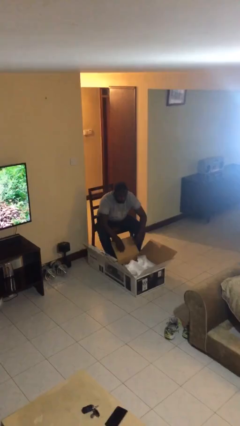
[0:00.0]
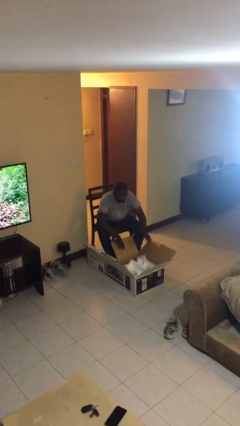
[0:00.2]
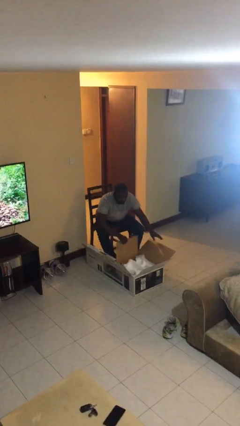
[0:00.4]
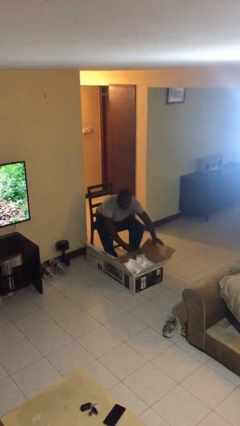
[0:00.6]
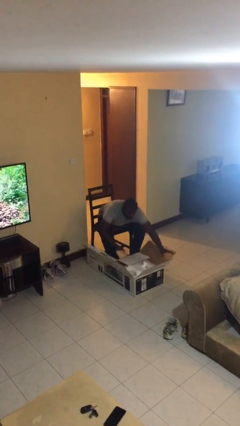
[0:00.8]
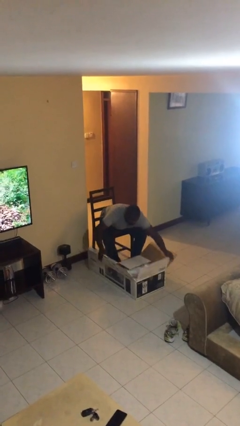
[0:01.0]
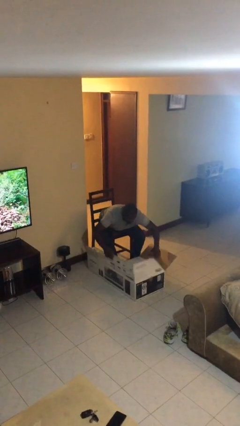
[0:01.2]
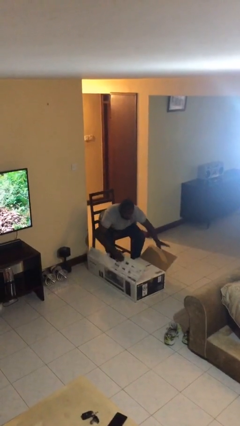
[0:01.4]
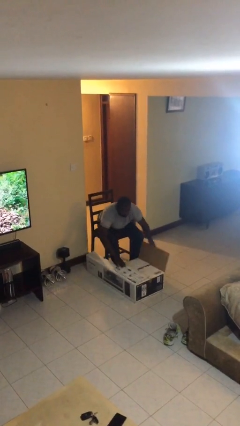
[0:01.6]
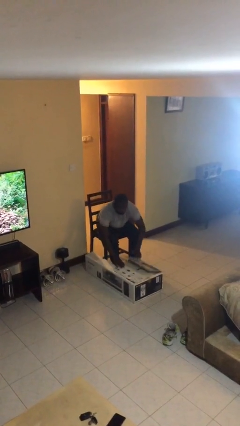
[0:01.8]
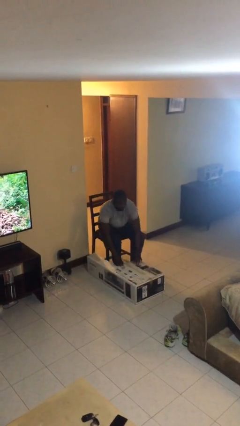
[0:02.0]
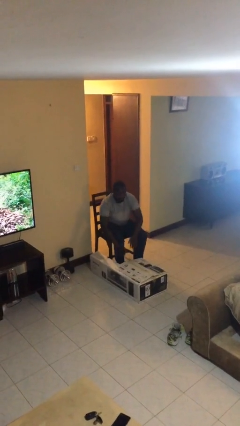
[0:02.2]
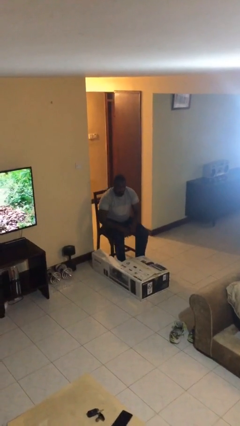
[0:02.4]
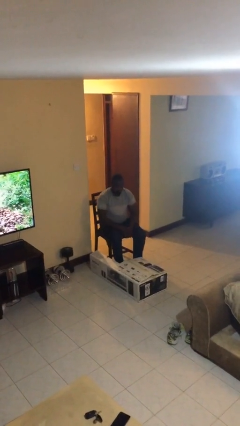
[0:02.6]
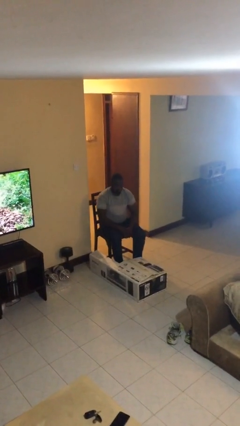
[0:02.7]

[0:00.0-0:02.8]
person closes box

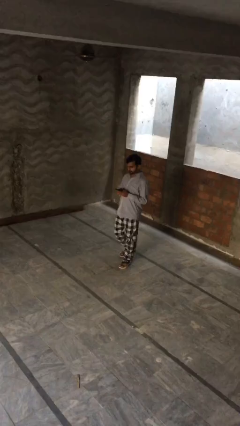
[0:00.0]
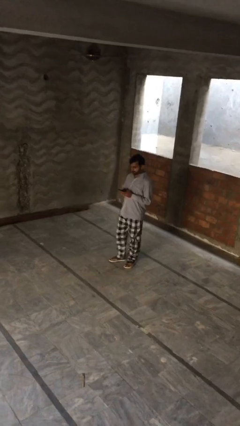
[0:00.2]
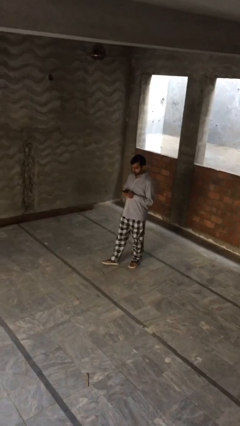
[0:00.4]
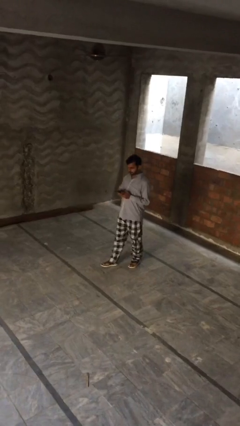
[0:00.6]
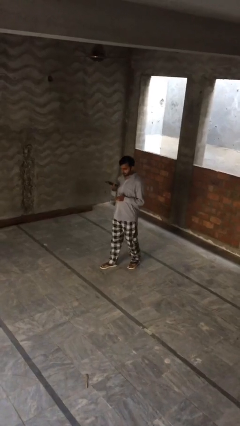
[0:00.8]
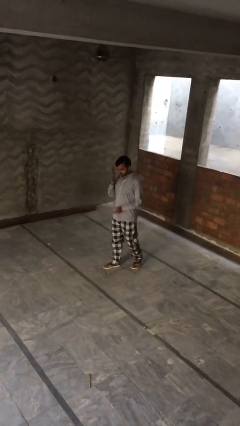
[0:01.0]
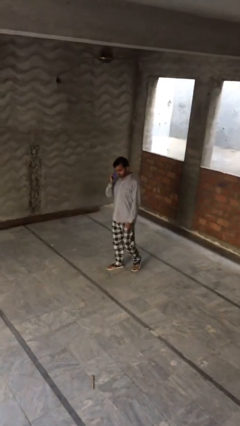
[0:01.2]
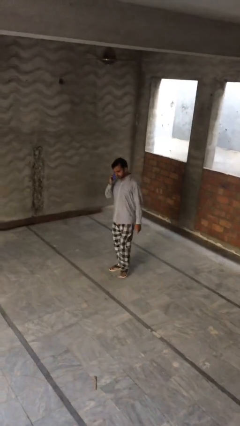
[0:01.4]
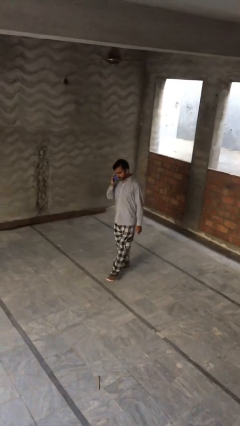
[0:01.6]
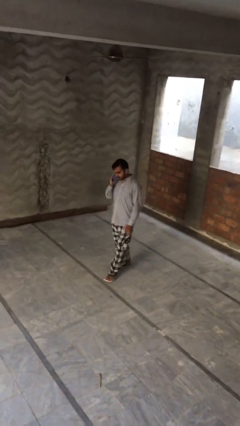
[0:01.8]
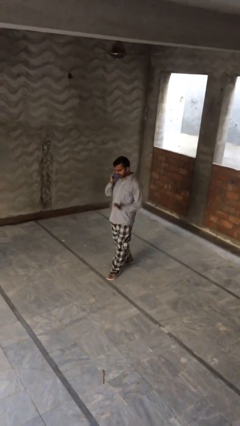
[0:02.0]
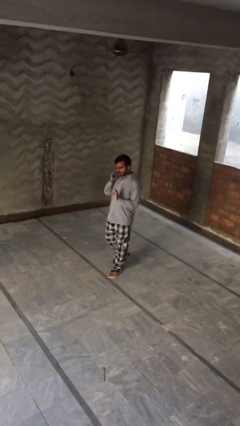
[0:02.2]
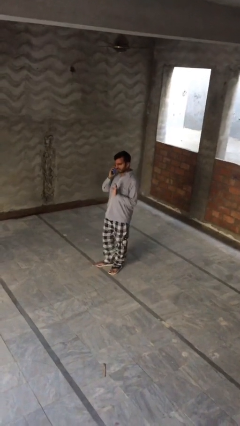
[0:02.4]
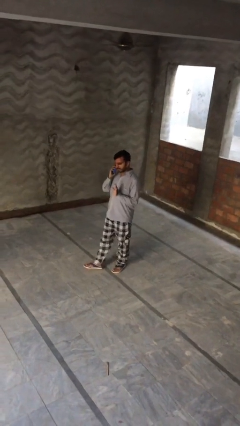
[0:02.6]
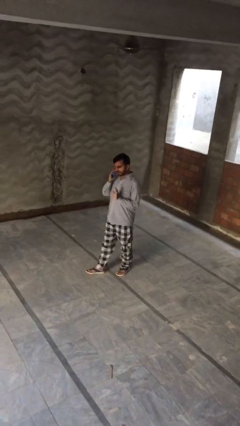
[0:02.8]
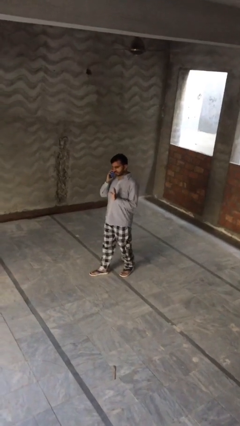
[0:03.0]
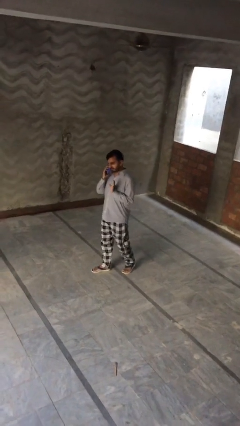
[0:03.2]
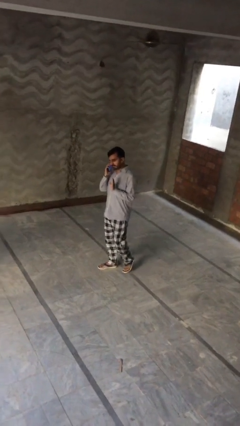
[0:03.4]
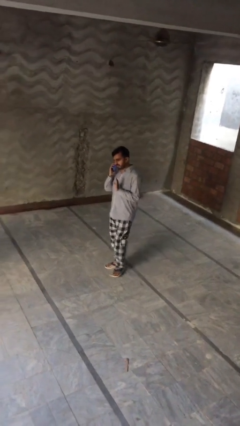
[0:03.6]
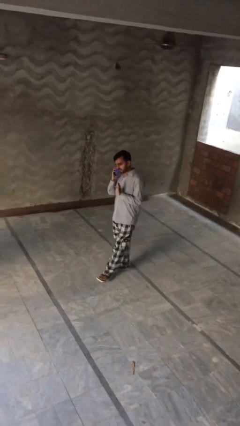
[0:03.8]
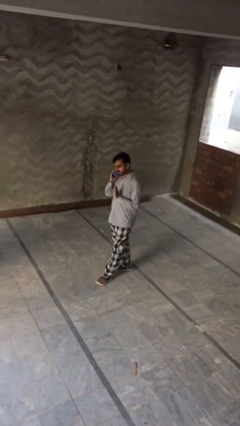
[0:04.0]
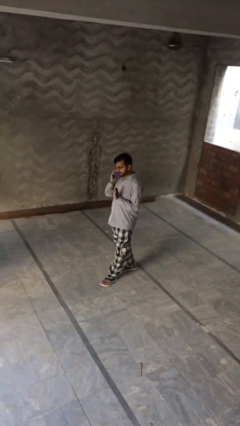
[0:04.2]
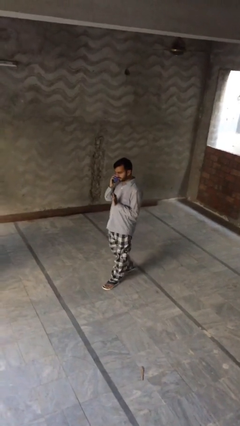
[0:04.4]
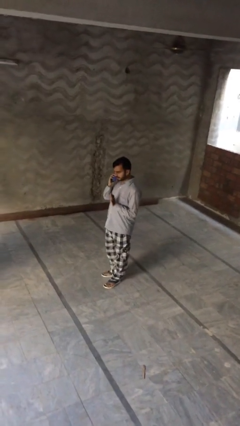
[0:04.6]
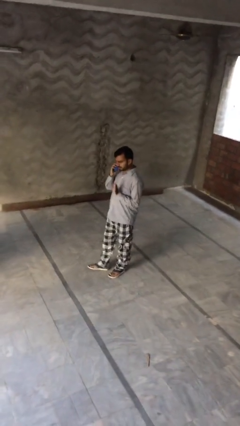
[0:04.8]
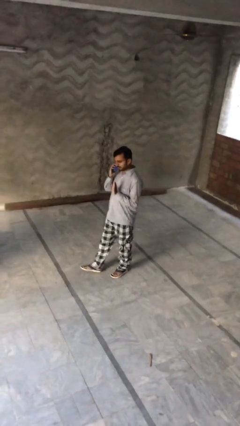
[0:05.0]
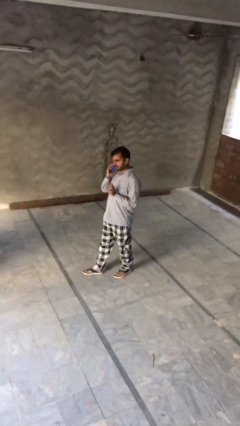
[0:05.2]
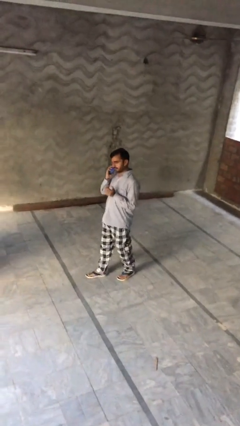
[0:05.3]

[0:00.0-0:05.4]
person talks on phone

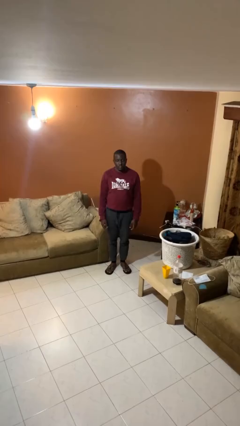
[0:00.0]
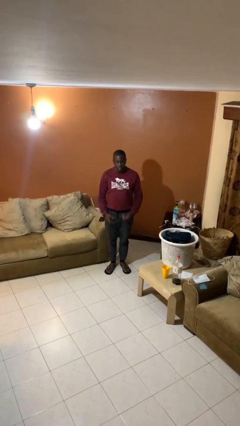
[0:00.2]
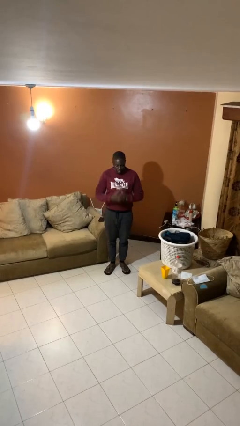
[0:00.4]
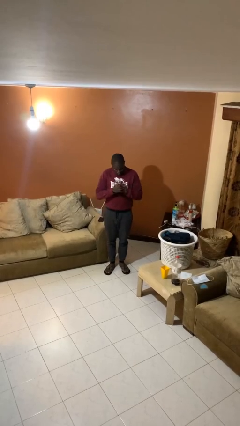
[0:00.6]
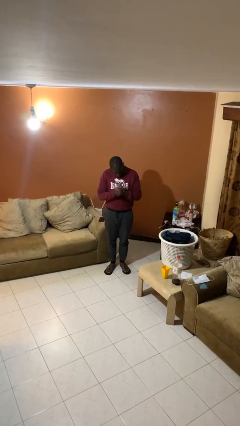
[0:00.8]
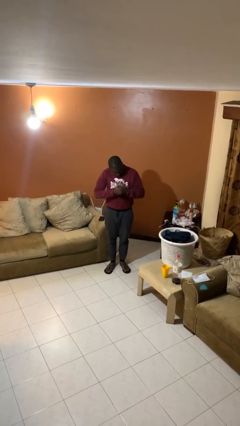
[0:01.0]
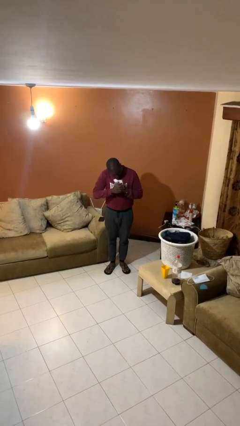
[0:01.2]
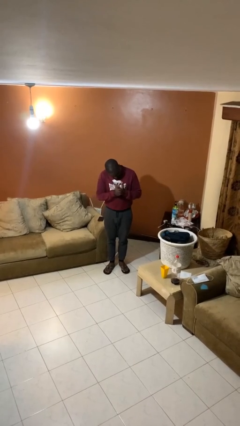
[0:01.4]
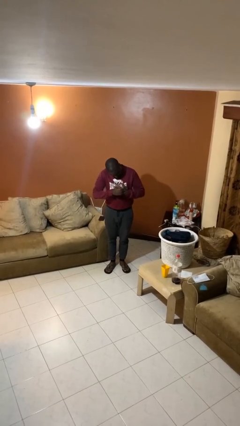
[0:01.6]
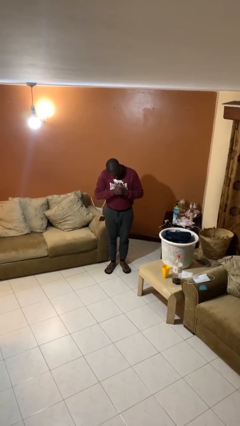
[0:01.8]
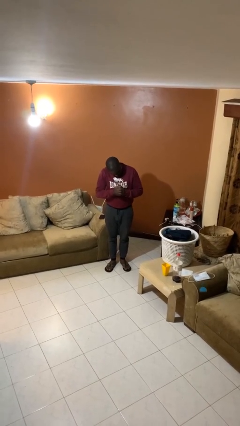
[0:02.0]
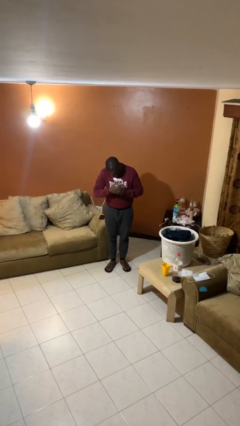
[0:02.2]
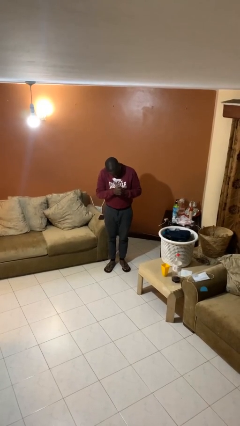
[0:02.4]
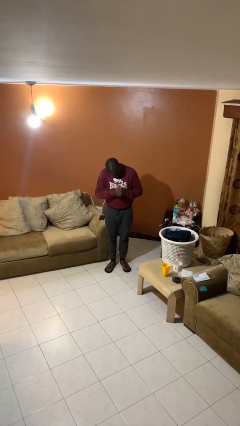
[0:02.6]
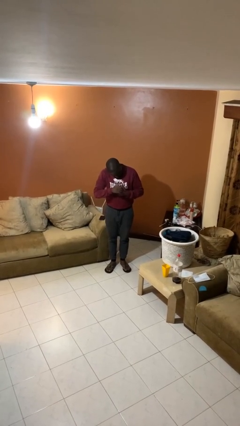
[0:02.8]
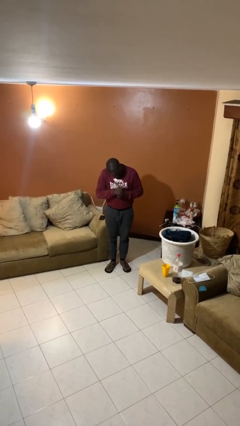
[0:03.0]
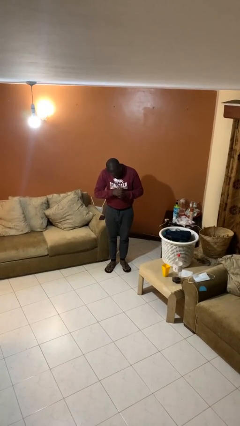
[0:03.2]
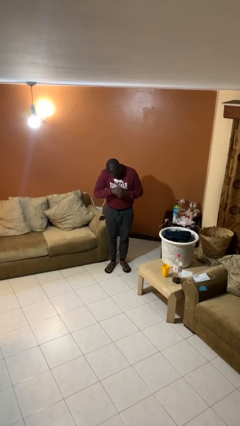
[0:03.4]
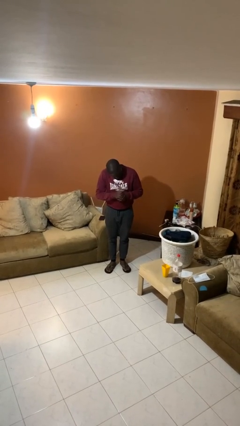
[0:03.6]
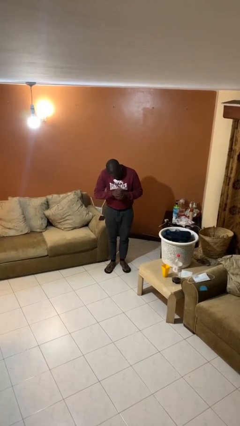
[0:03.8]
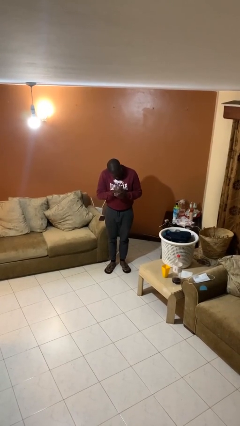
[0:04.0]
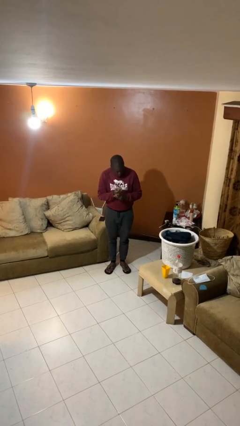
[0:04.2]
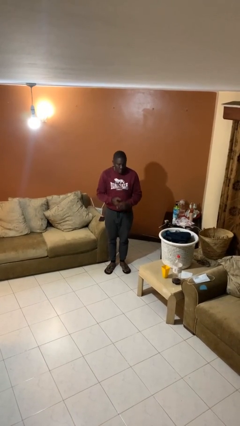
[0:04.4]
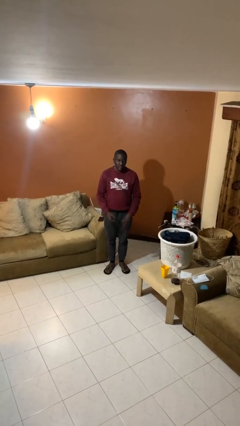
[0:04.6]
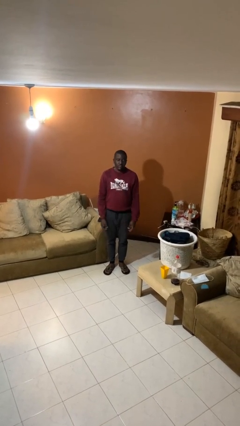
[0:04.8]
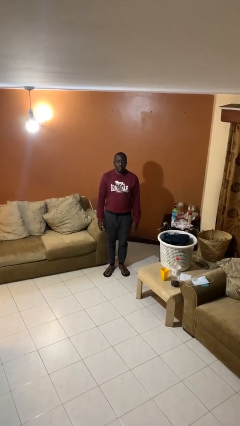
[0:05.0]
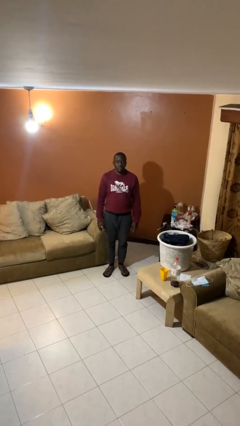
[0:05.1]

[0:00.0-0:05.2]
person cracks knuckles

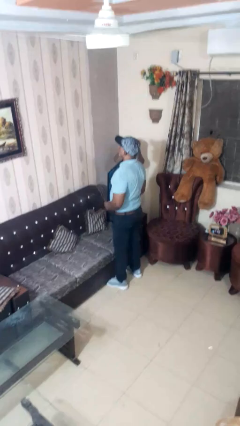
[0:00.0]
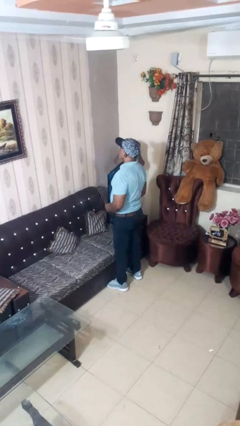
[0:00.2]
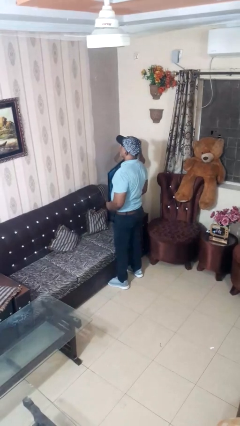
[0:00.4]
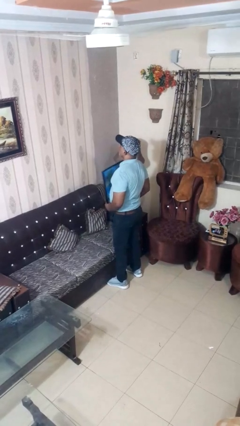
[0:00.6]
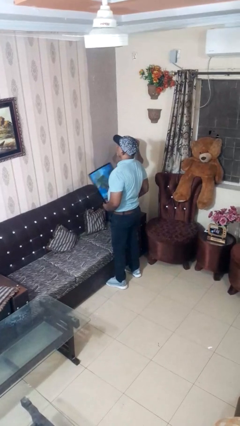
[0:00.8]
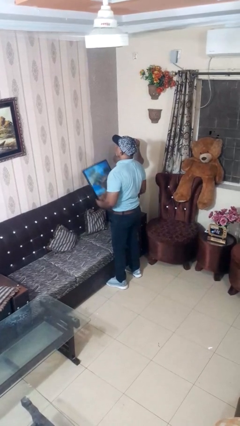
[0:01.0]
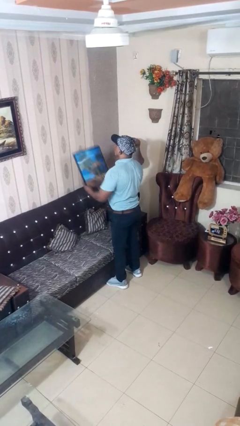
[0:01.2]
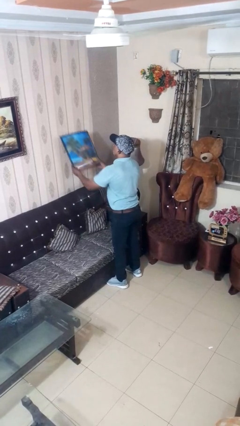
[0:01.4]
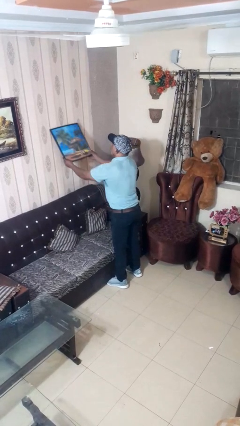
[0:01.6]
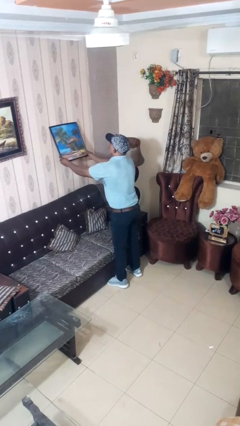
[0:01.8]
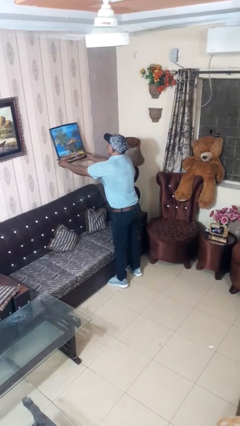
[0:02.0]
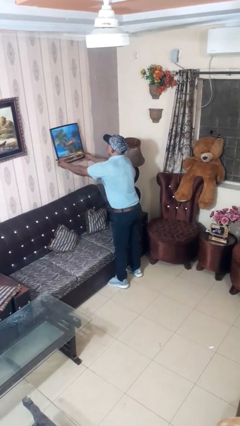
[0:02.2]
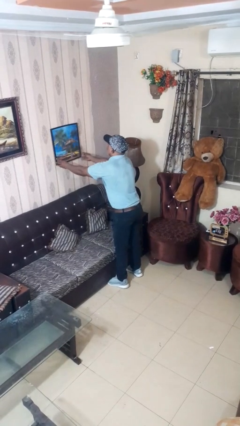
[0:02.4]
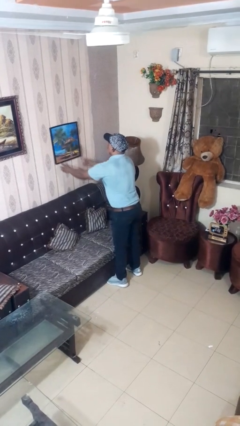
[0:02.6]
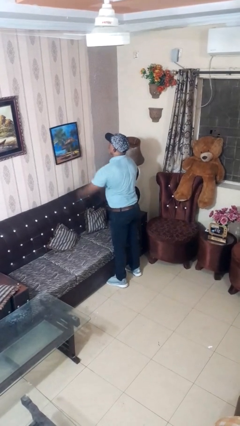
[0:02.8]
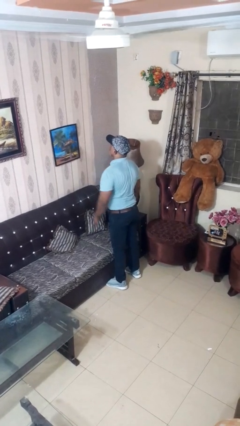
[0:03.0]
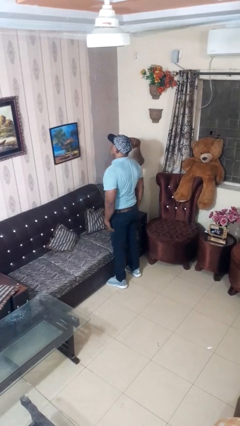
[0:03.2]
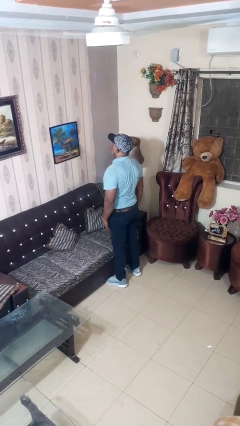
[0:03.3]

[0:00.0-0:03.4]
person puts up picture frame

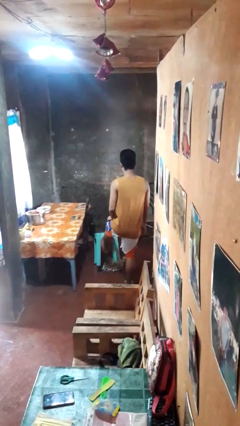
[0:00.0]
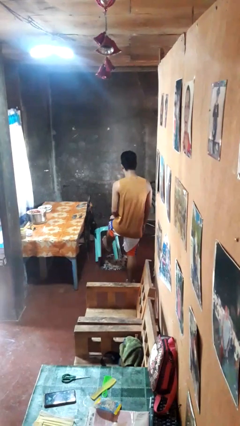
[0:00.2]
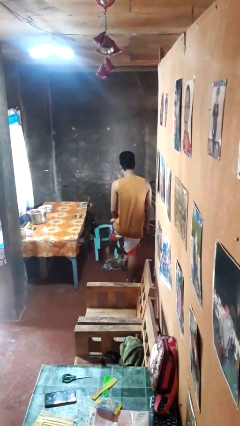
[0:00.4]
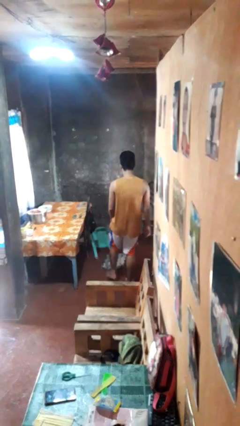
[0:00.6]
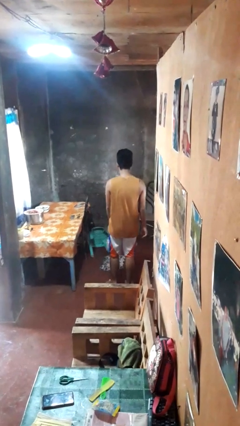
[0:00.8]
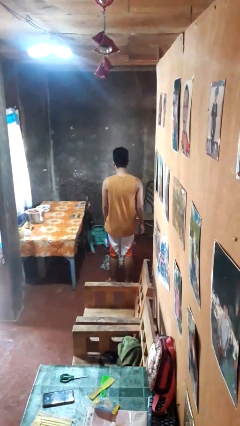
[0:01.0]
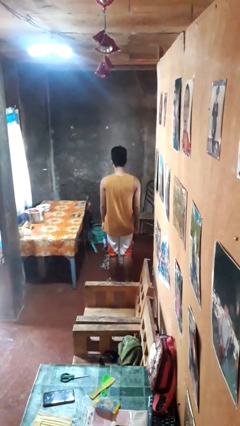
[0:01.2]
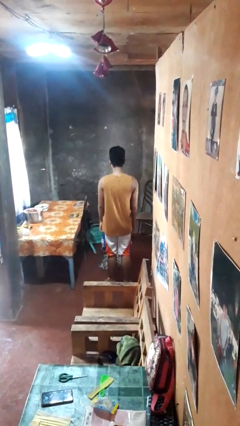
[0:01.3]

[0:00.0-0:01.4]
person knocks over furniture
